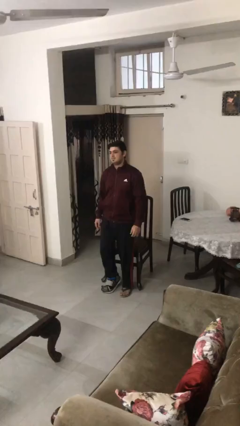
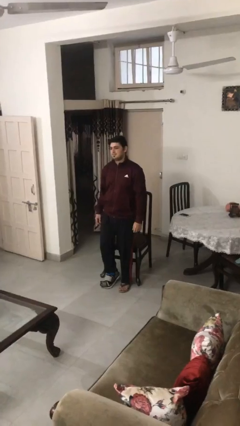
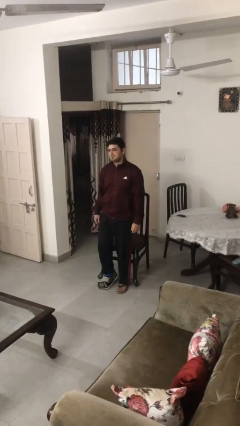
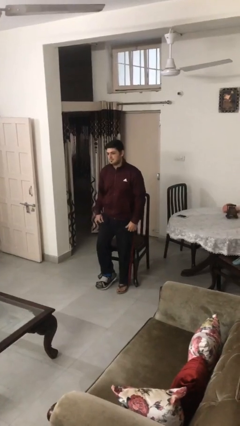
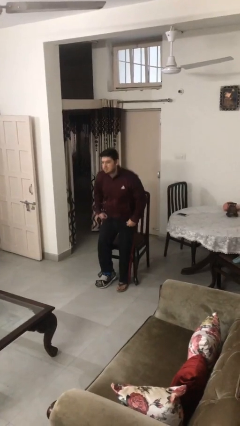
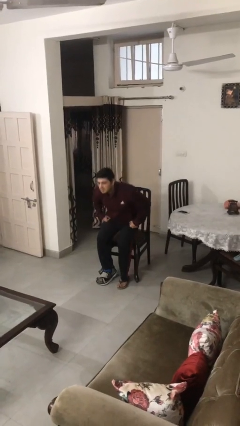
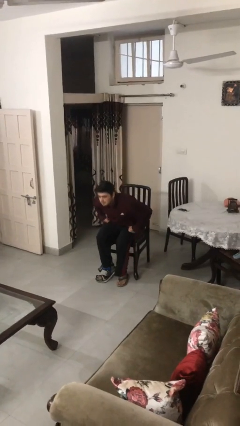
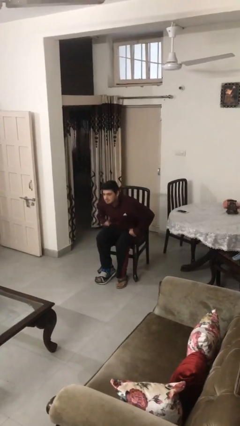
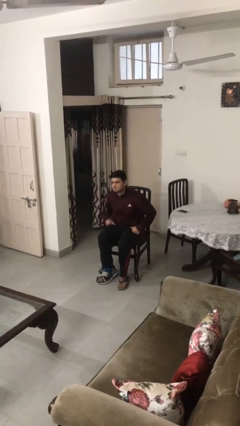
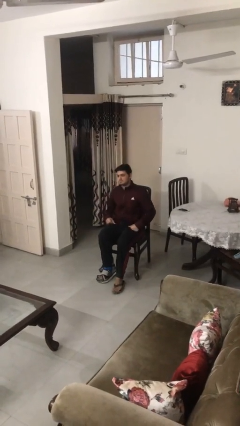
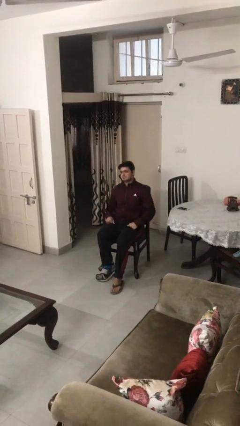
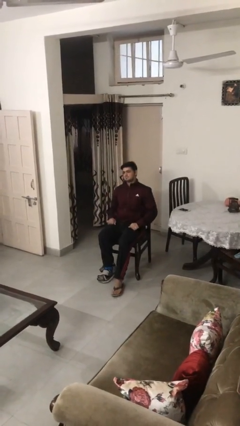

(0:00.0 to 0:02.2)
person sits down

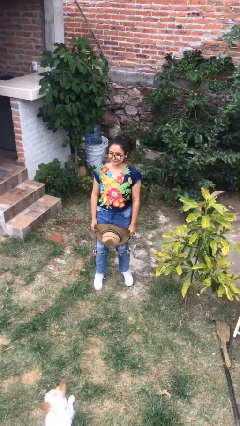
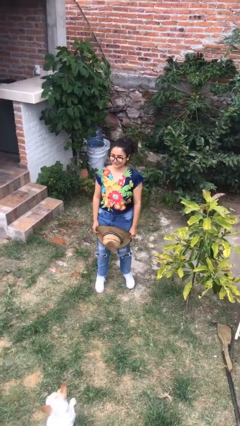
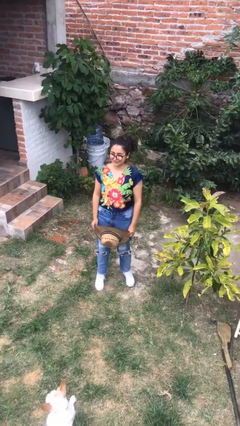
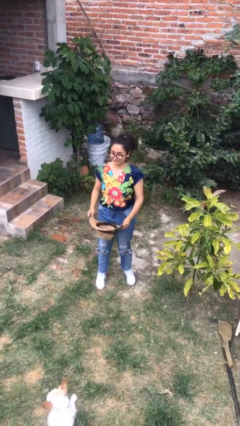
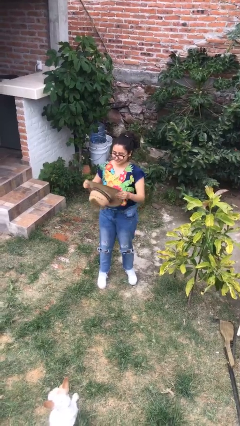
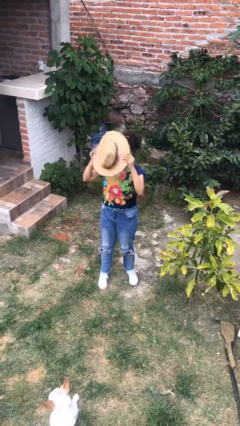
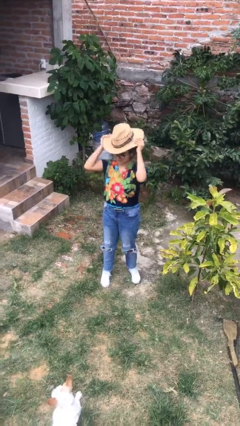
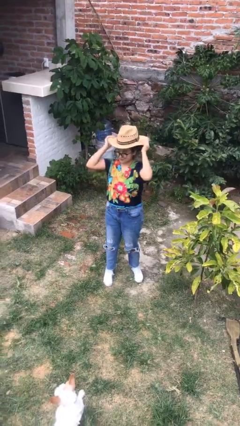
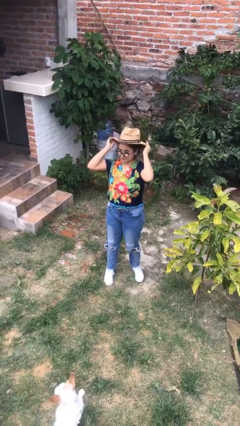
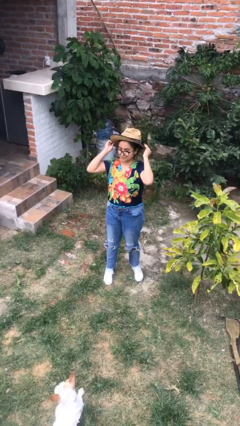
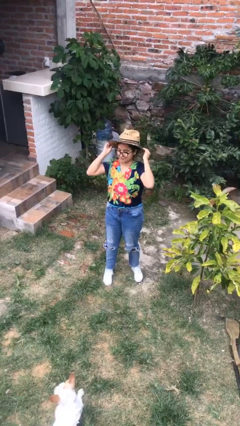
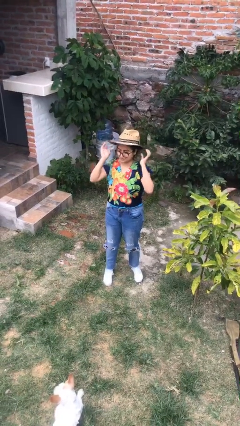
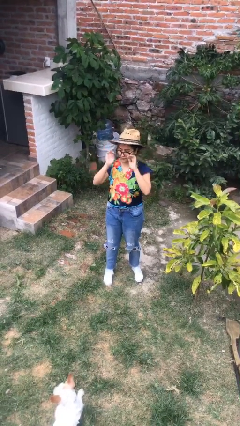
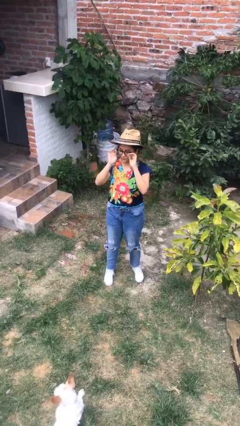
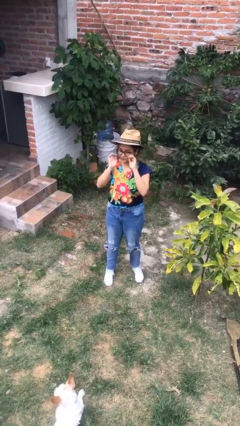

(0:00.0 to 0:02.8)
person puts on hat

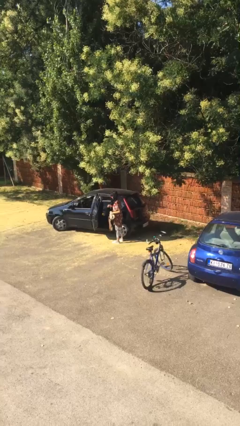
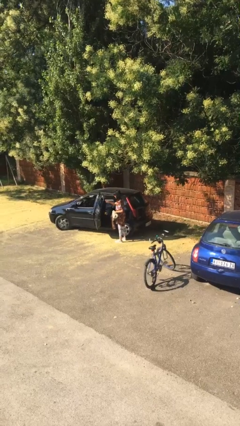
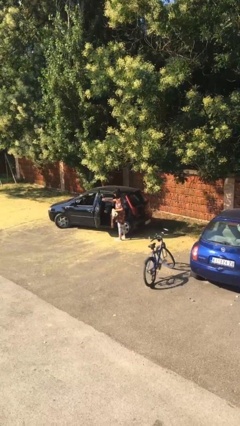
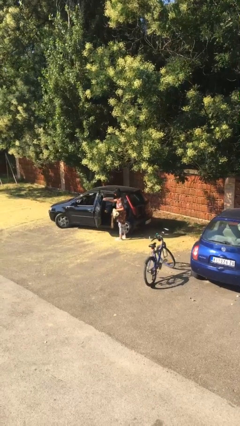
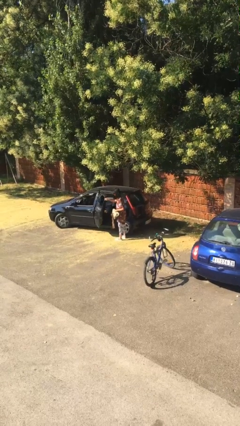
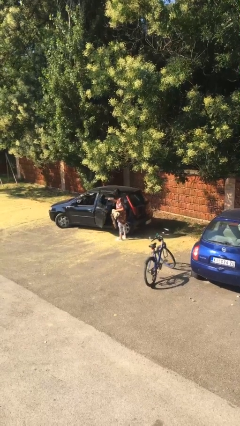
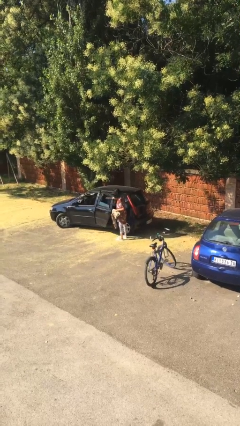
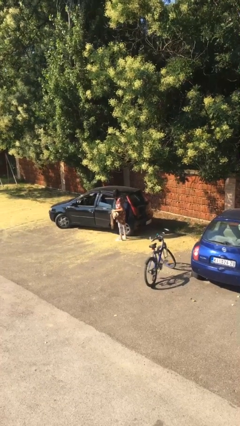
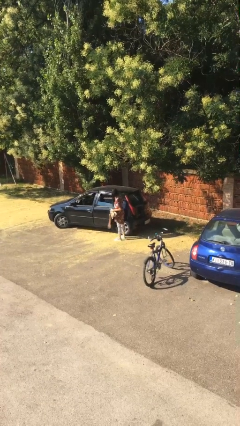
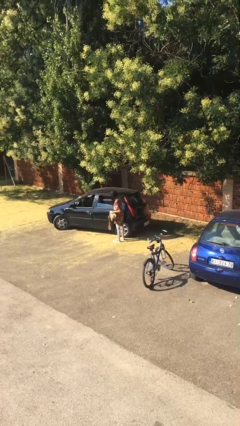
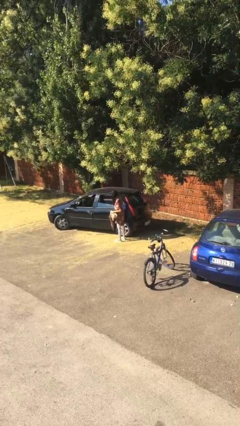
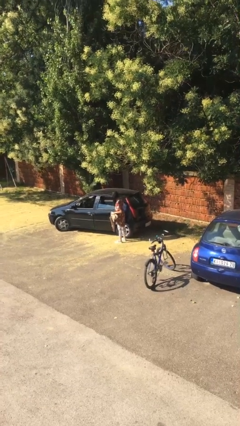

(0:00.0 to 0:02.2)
person closes car door

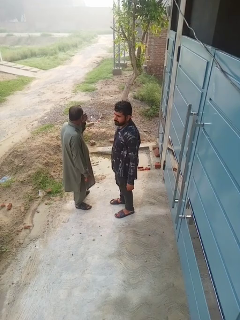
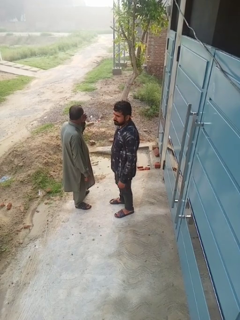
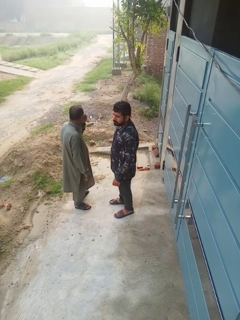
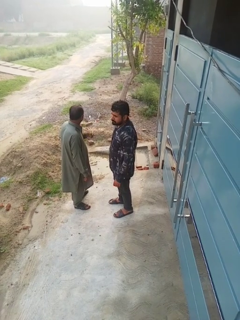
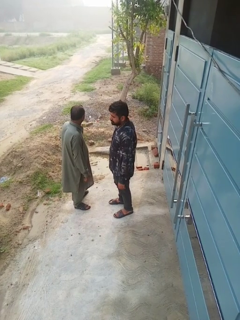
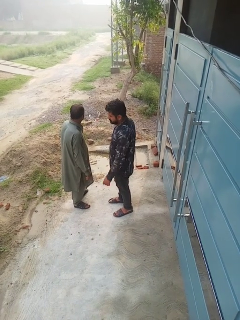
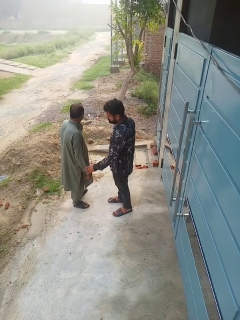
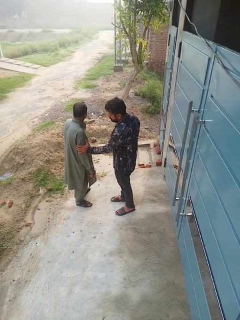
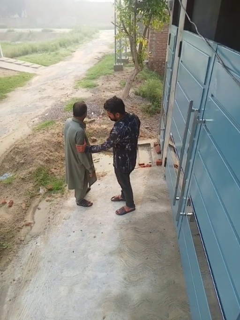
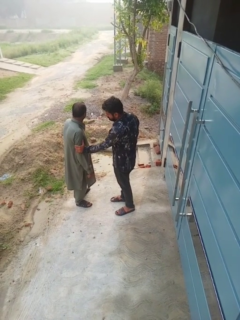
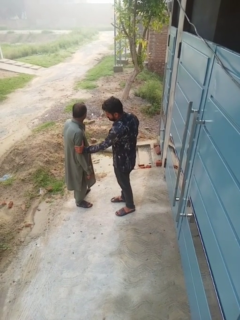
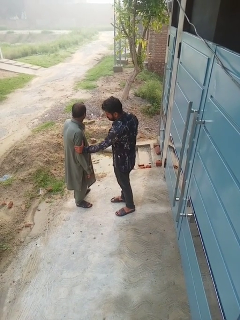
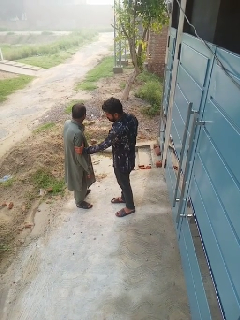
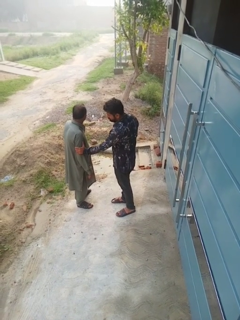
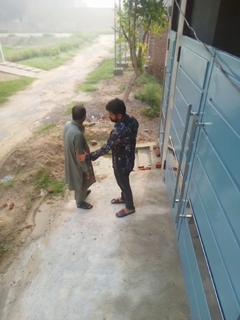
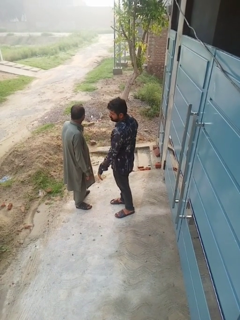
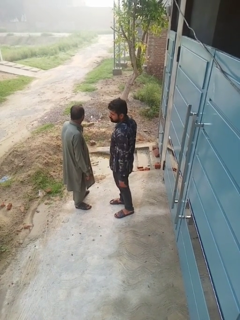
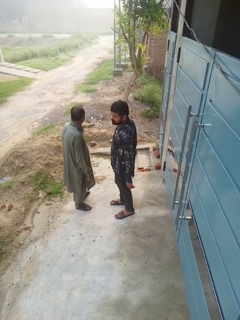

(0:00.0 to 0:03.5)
person grabs person by bicep

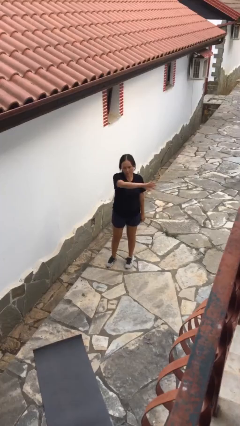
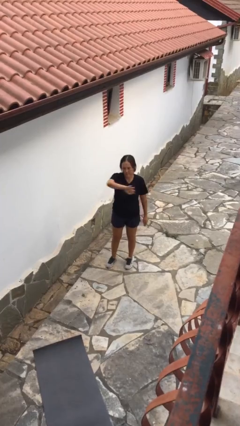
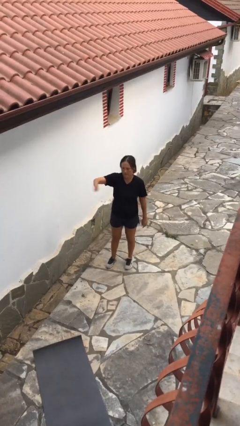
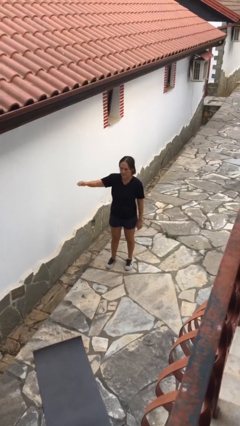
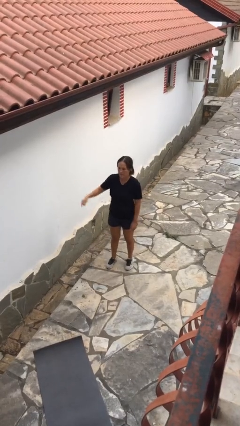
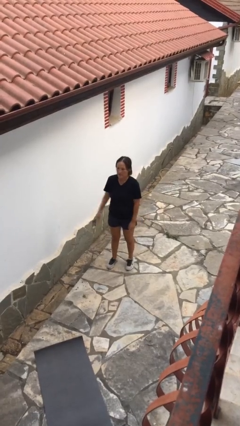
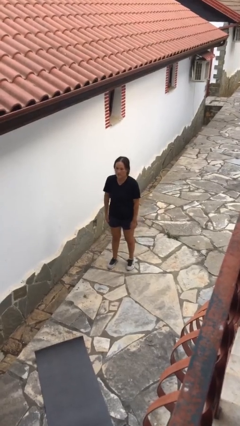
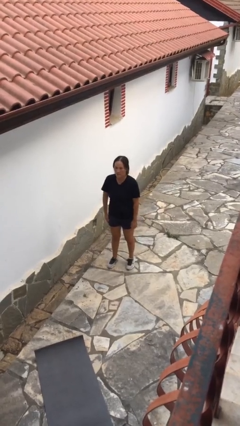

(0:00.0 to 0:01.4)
person gestures swipe right

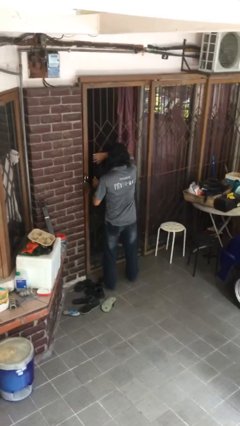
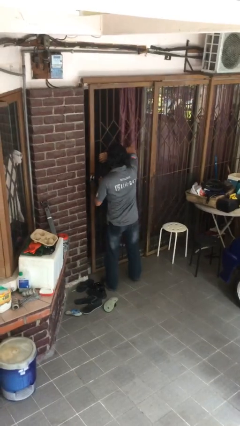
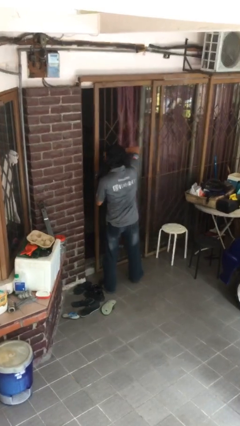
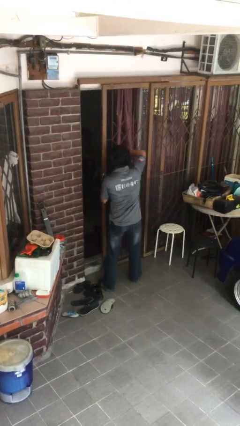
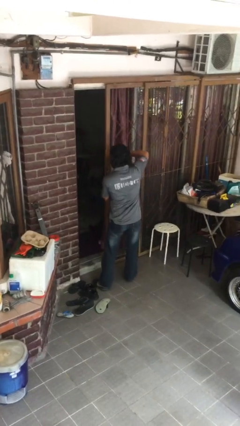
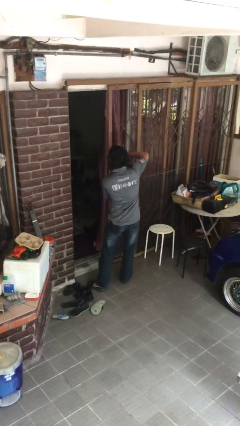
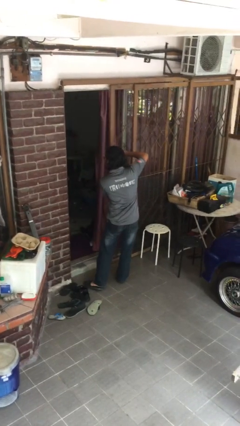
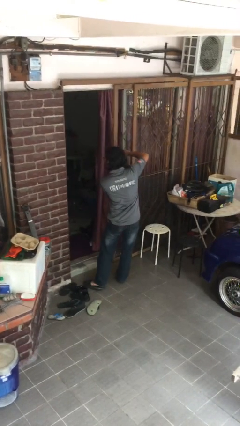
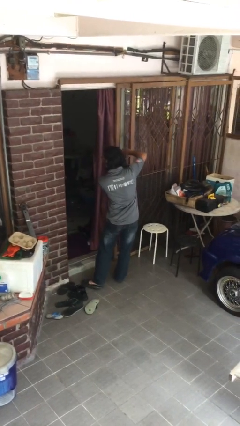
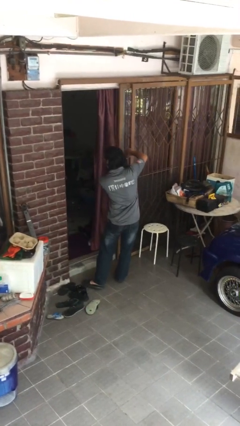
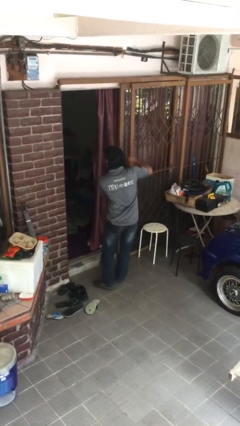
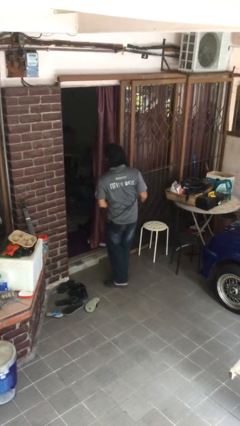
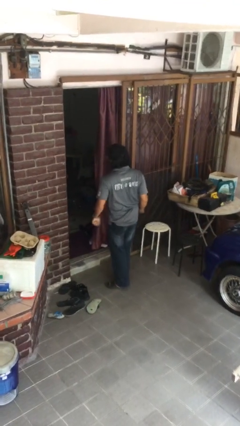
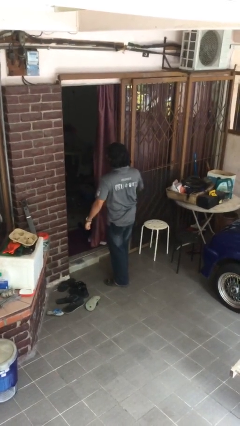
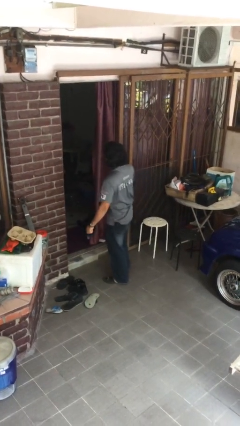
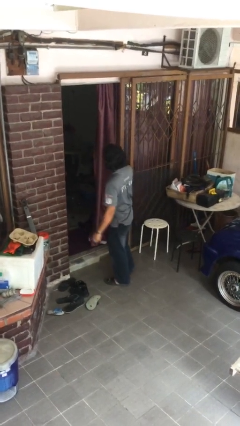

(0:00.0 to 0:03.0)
person opens facility door

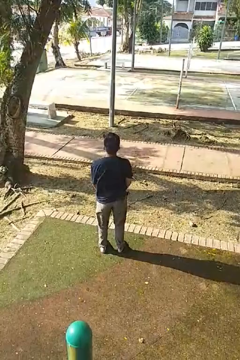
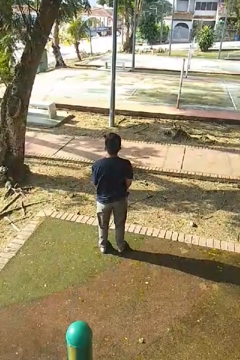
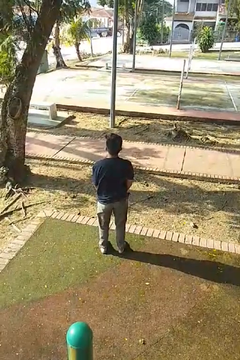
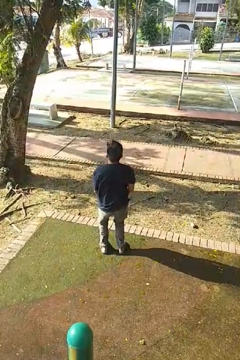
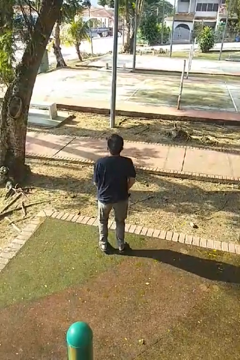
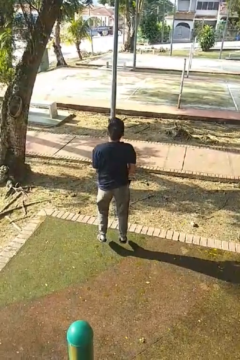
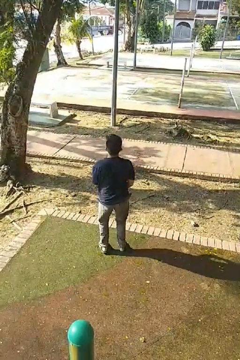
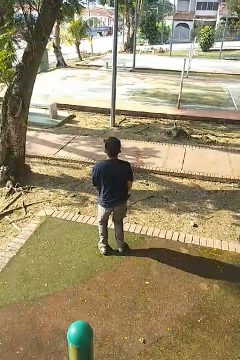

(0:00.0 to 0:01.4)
person jumps

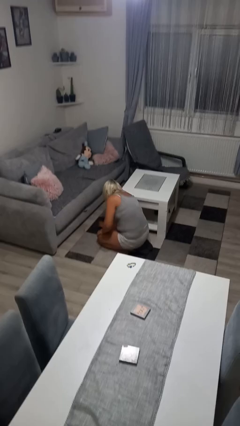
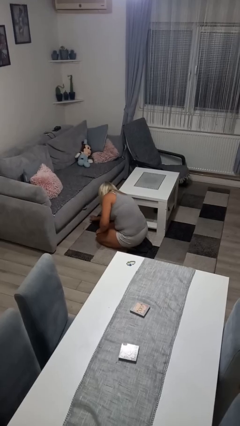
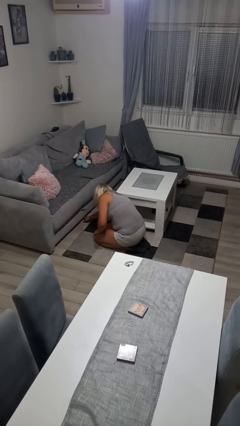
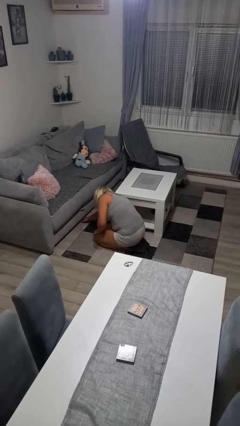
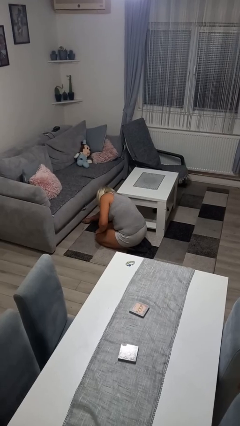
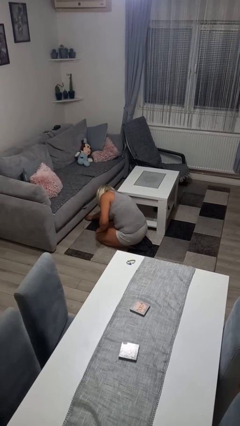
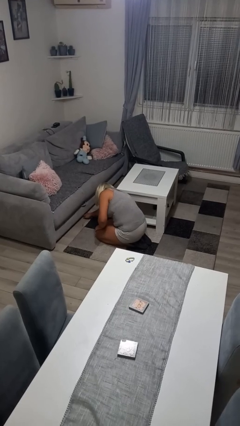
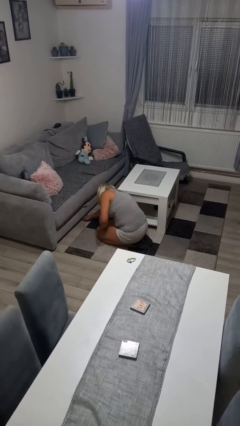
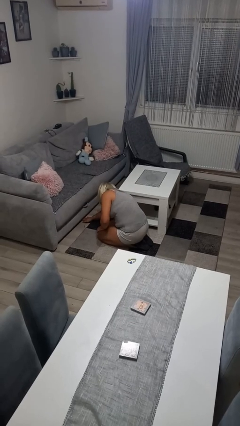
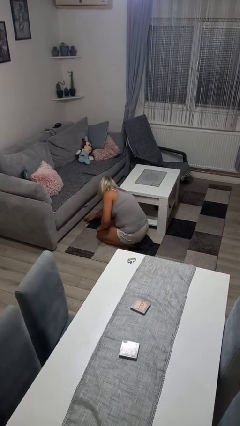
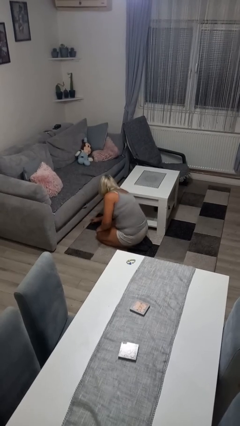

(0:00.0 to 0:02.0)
person searches under couch
